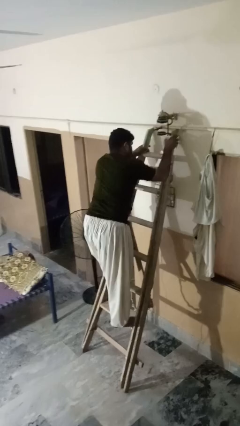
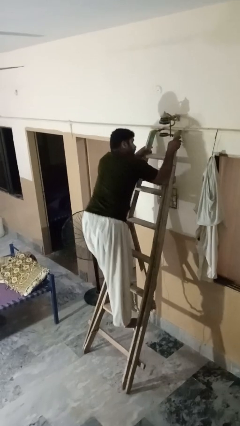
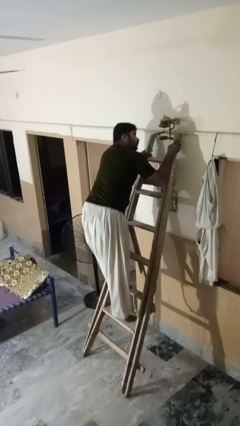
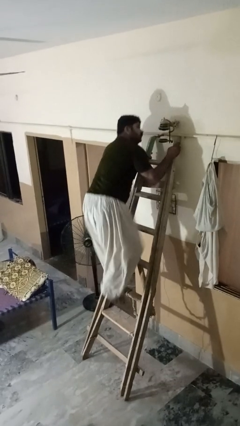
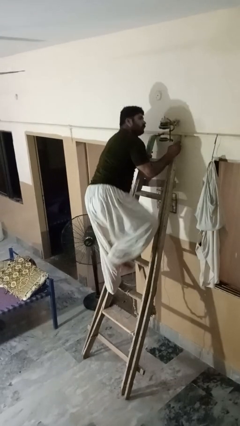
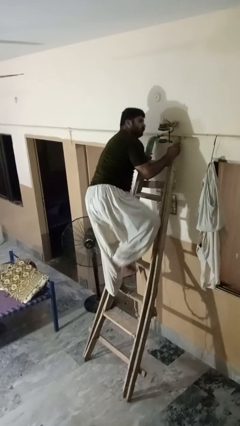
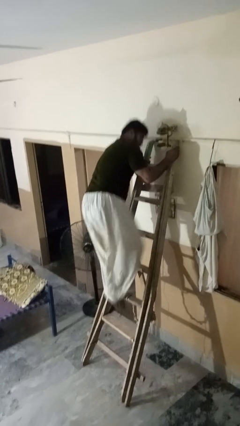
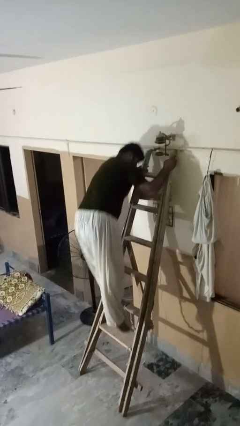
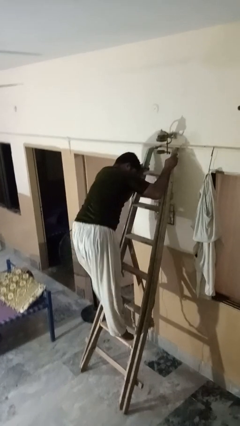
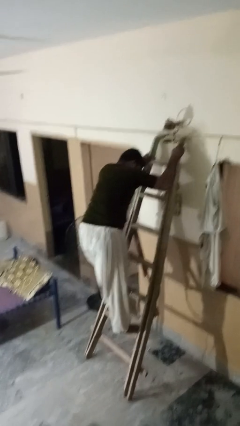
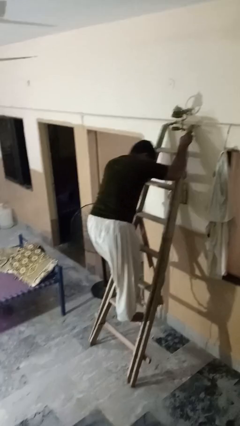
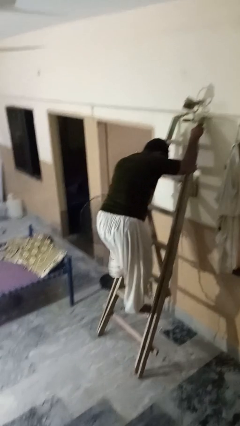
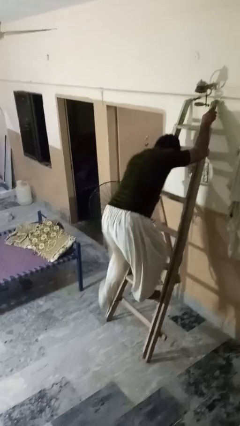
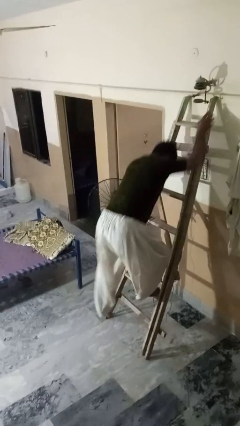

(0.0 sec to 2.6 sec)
person climbs down ladder

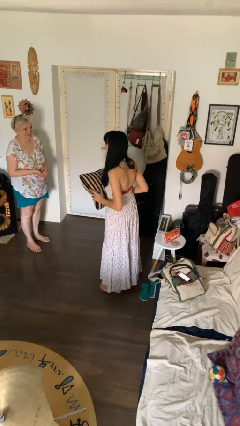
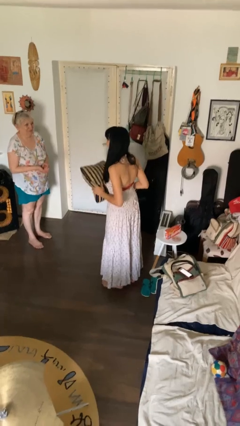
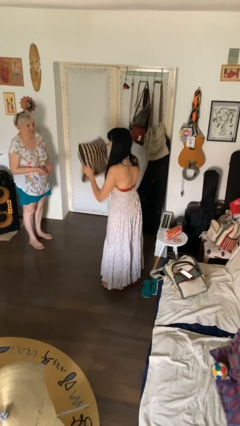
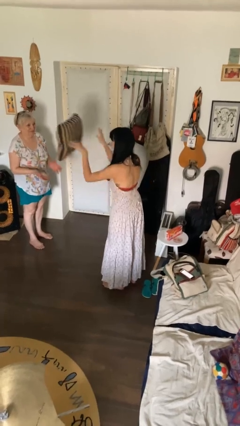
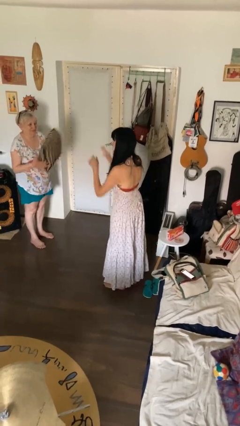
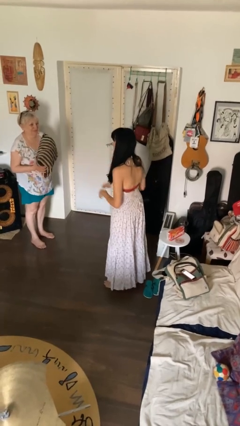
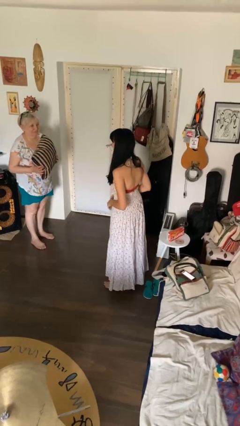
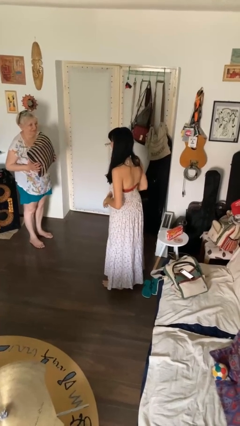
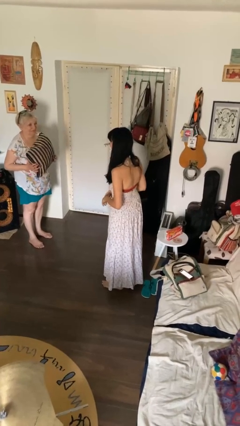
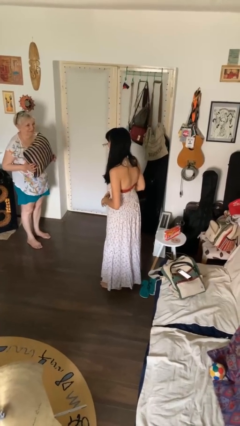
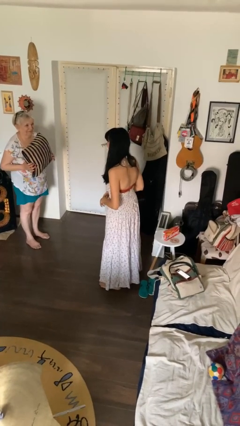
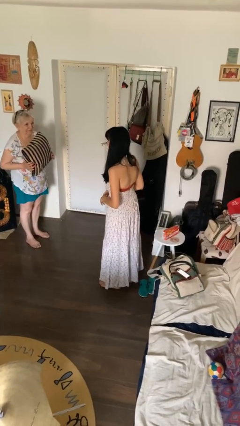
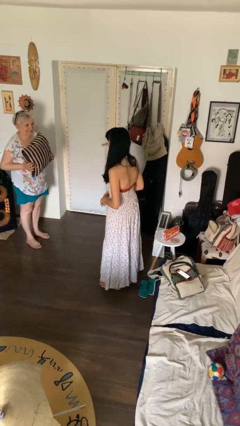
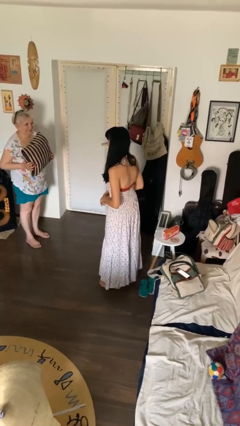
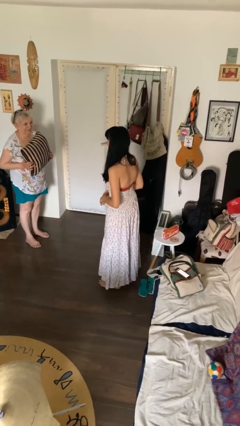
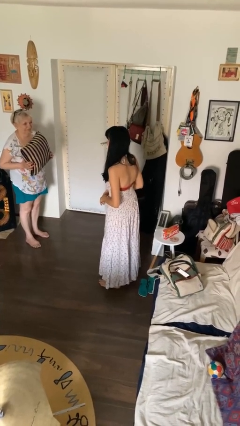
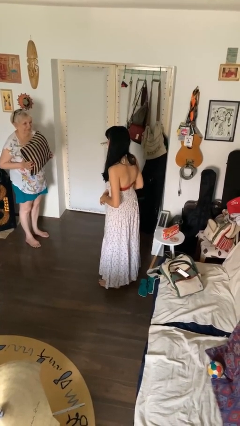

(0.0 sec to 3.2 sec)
person throws object to person

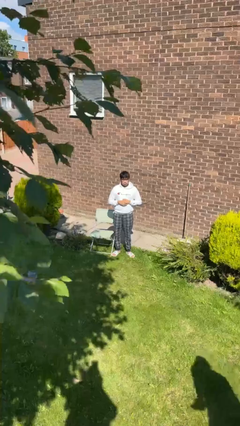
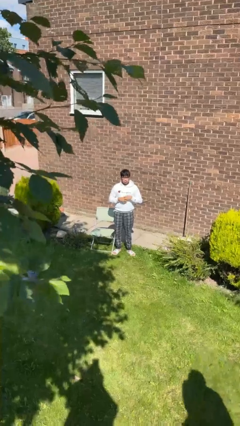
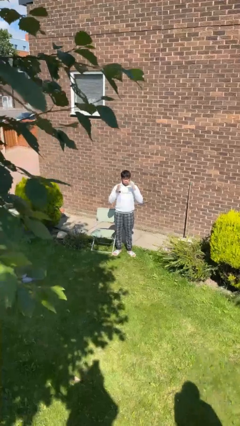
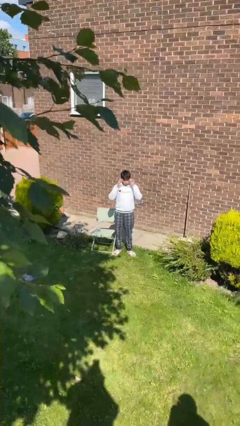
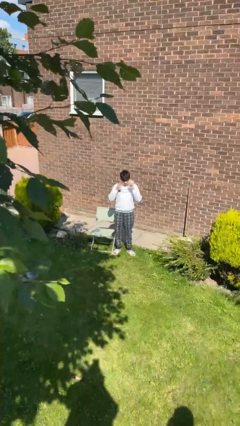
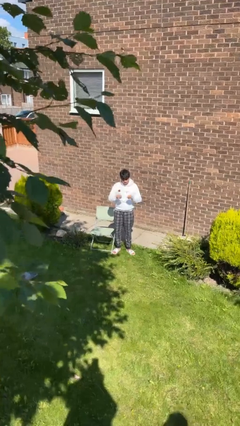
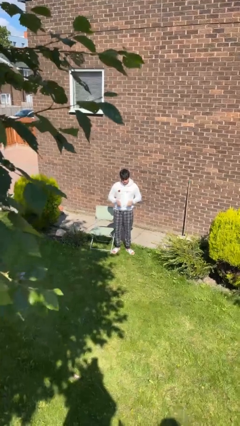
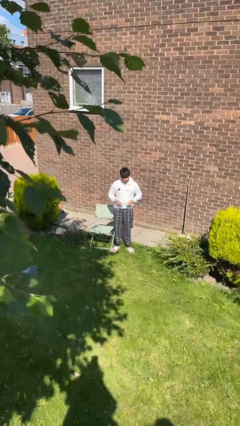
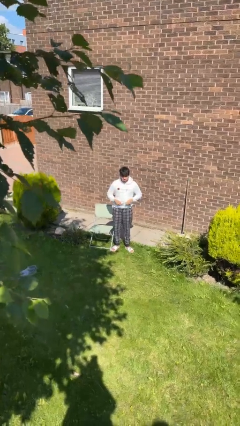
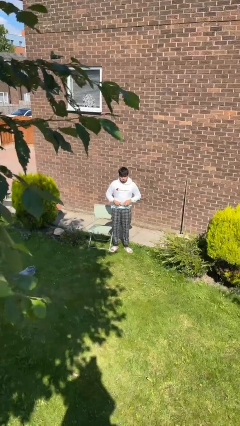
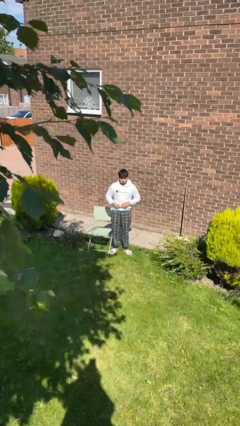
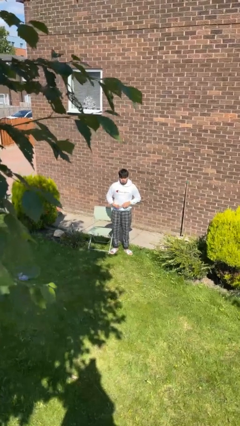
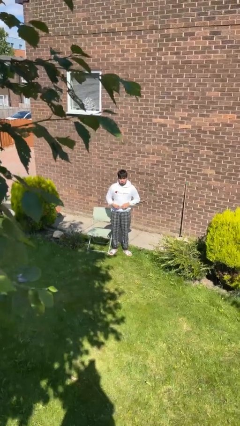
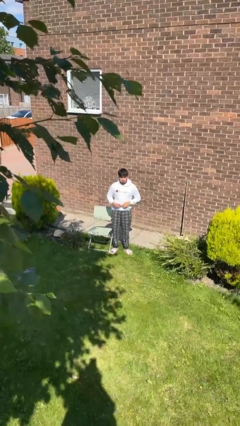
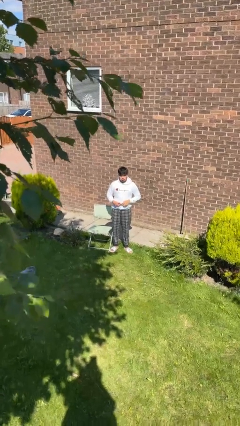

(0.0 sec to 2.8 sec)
person takes off glasses

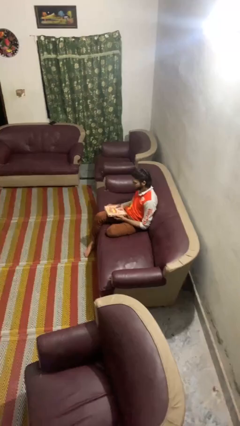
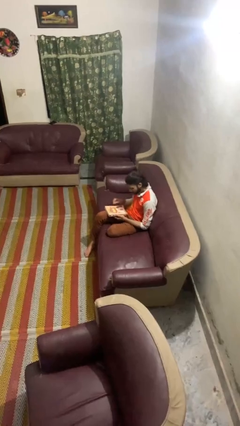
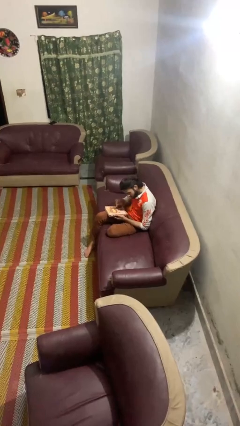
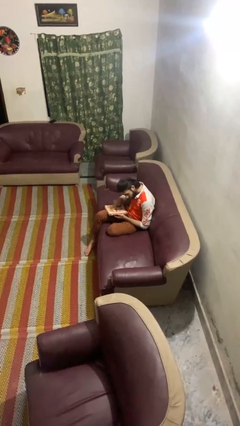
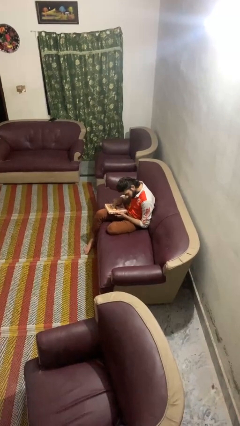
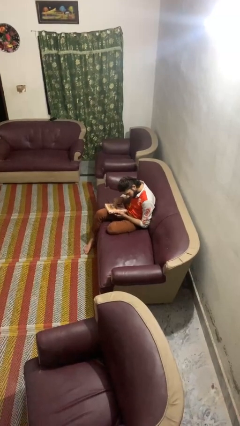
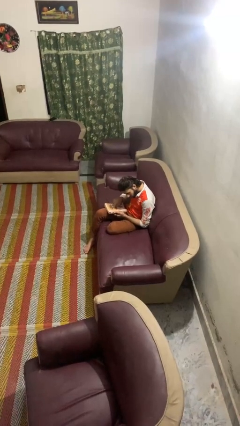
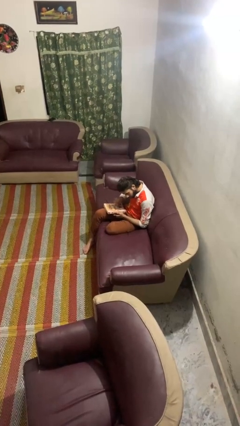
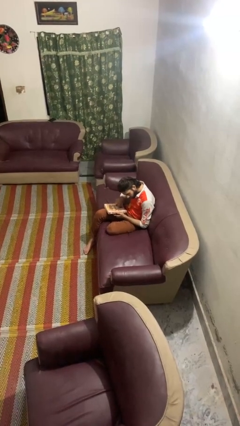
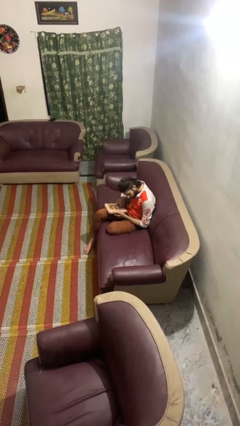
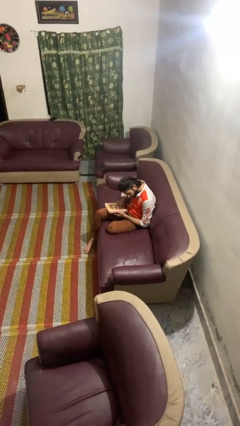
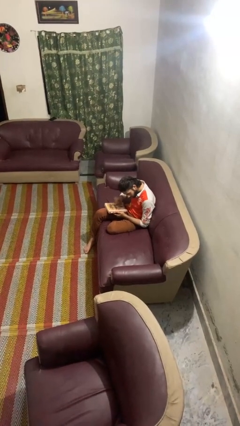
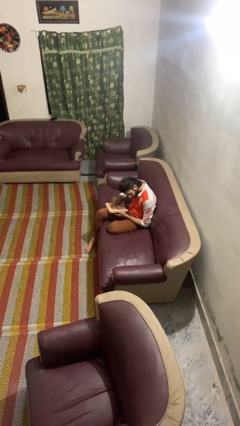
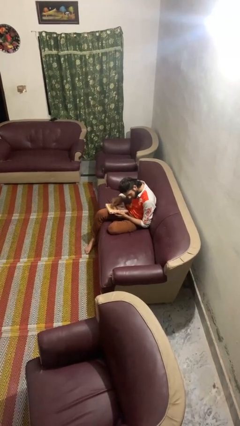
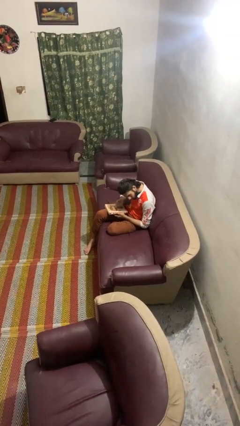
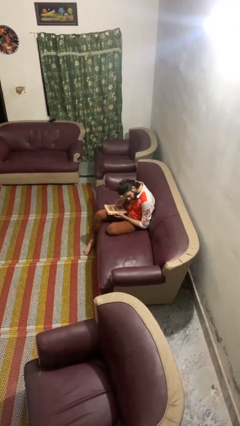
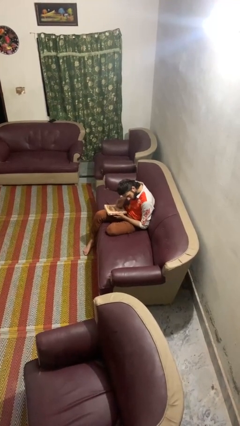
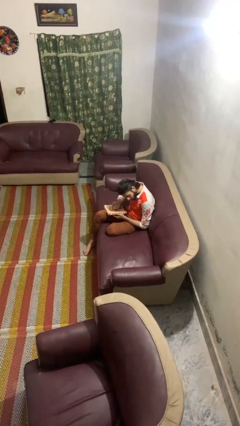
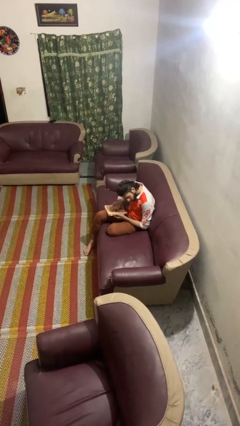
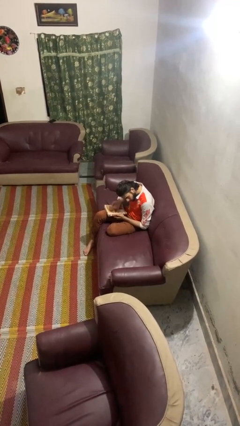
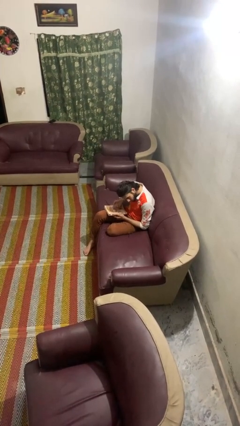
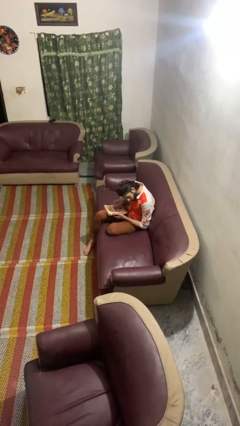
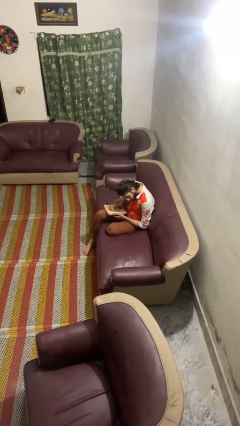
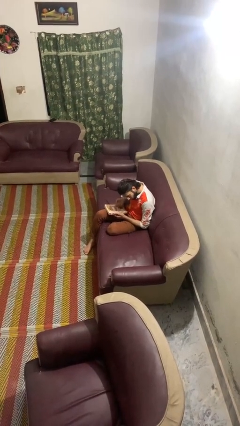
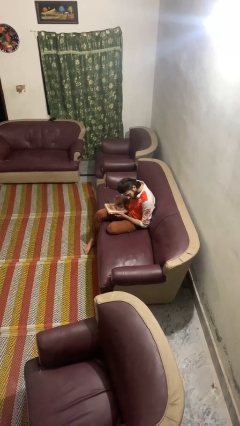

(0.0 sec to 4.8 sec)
person taps object with finger

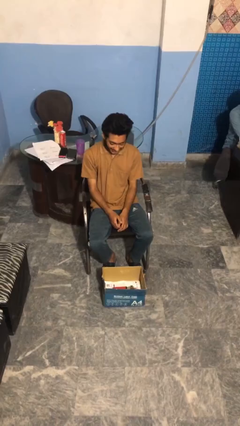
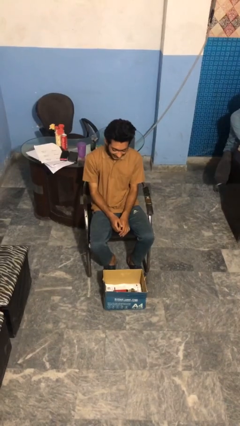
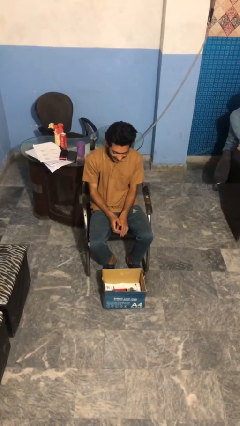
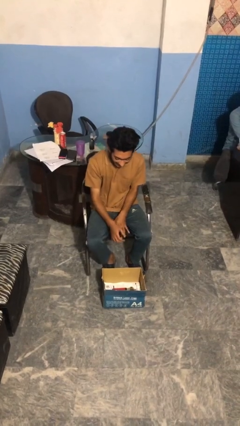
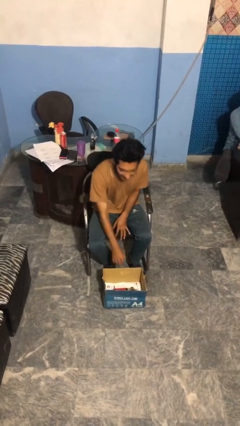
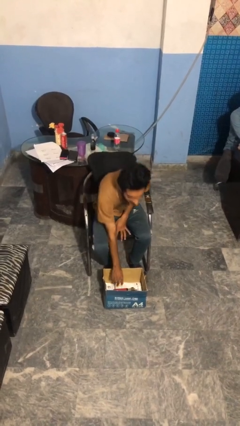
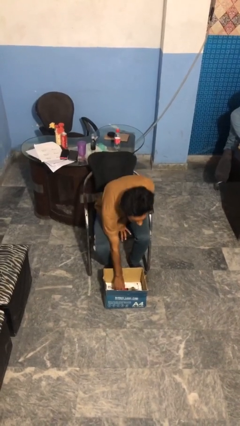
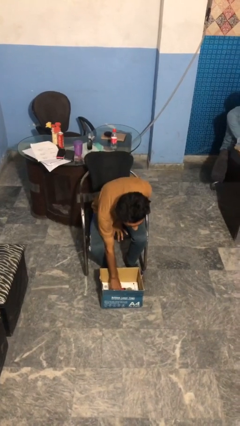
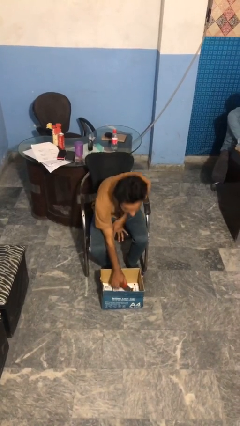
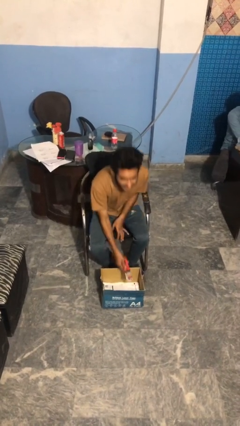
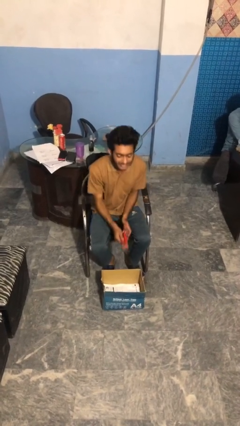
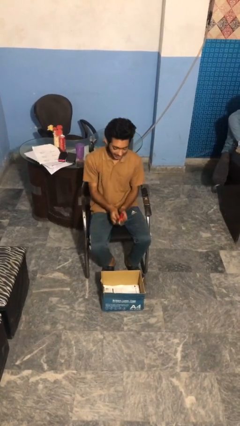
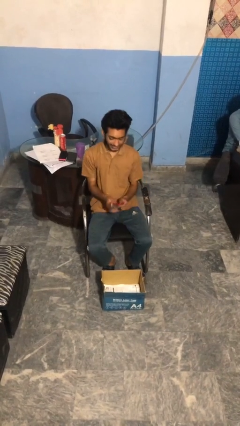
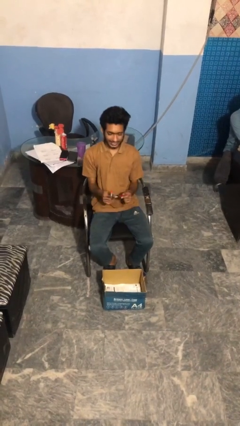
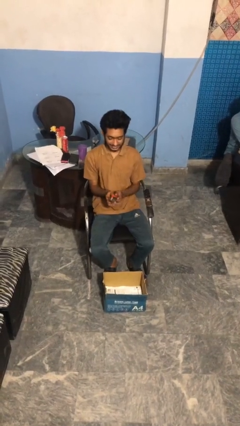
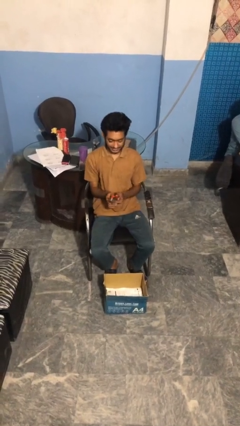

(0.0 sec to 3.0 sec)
person takes object from box

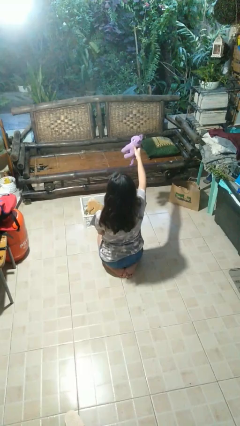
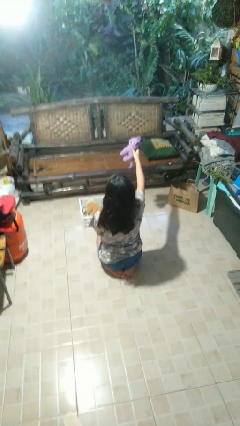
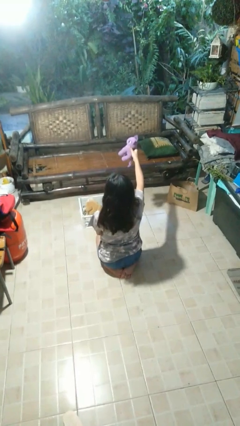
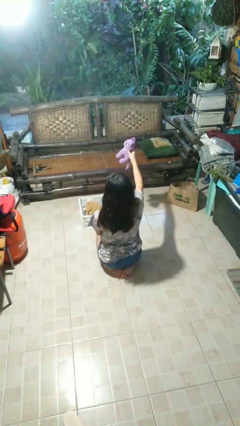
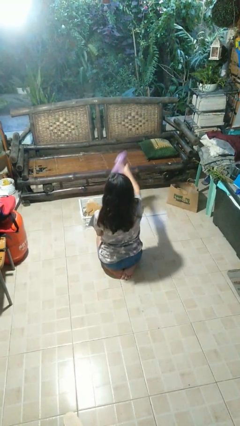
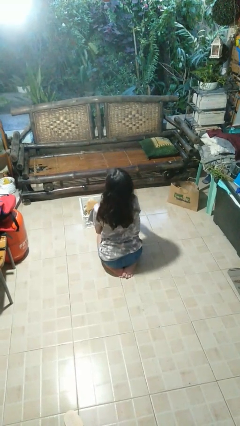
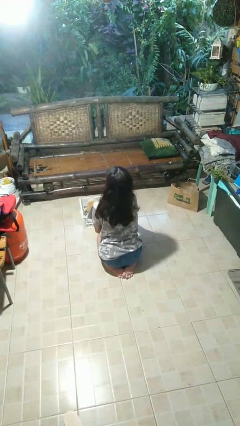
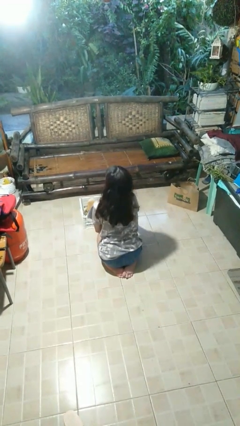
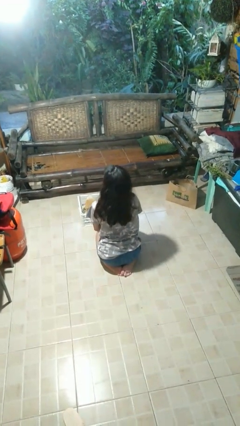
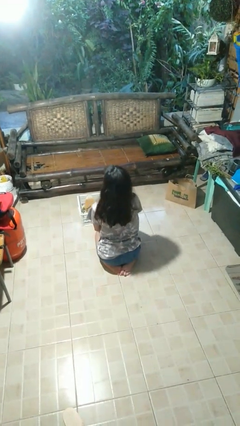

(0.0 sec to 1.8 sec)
person puts object into basket
